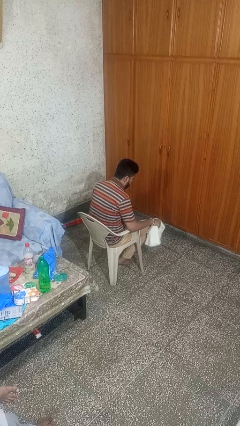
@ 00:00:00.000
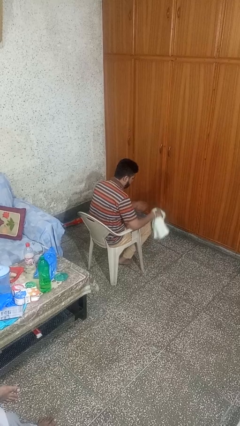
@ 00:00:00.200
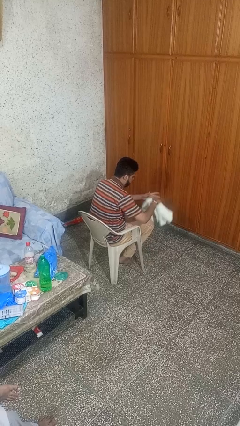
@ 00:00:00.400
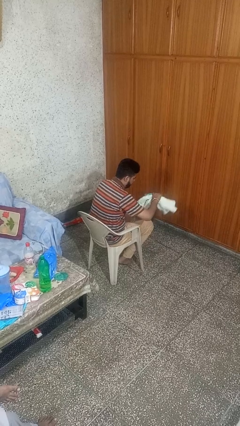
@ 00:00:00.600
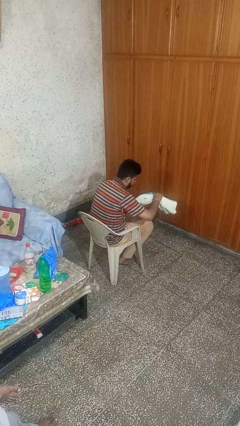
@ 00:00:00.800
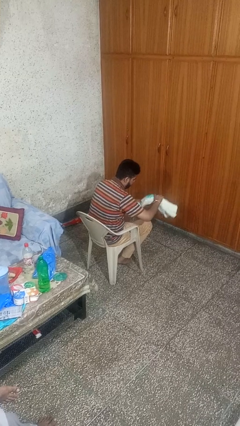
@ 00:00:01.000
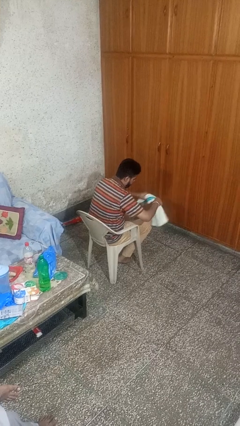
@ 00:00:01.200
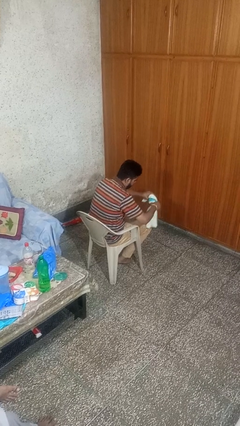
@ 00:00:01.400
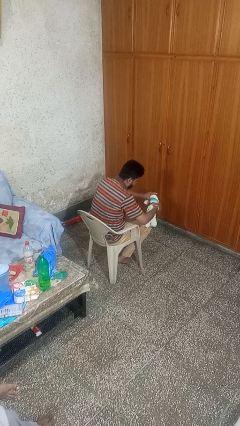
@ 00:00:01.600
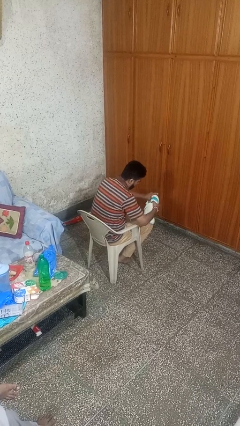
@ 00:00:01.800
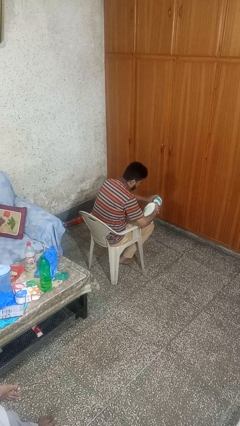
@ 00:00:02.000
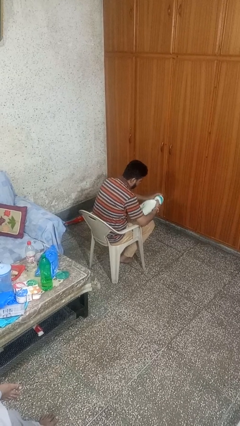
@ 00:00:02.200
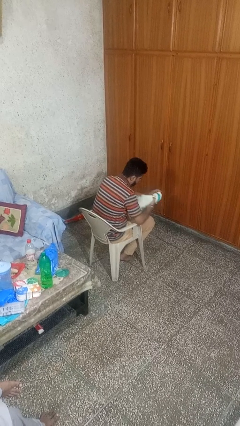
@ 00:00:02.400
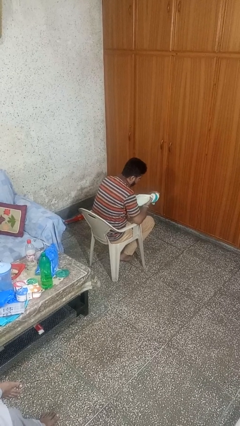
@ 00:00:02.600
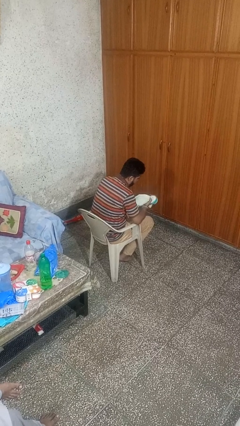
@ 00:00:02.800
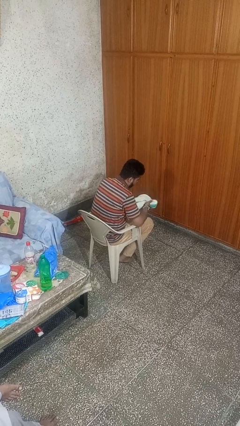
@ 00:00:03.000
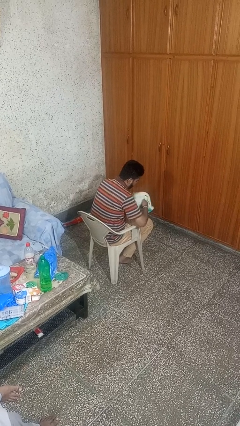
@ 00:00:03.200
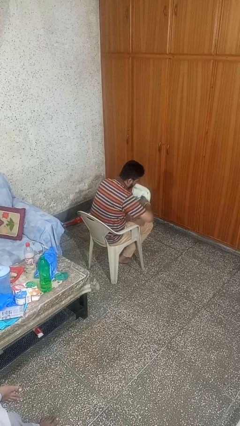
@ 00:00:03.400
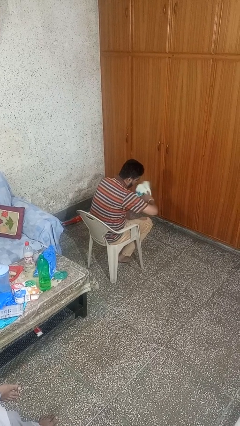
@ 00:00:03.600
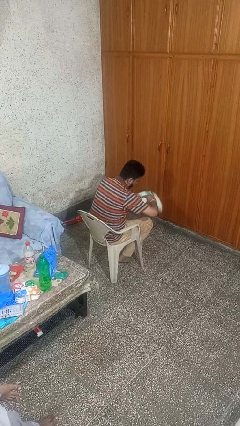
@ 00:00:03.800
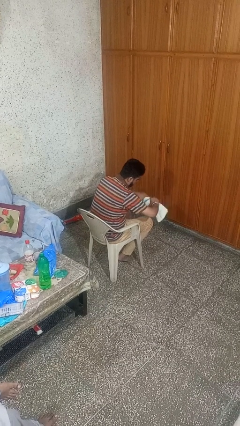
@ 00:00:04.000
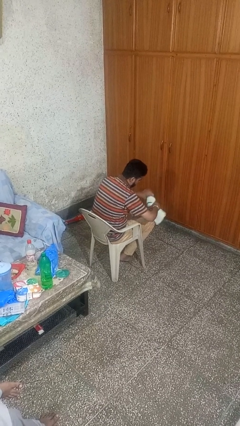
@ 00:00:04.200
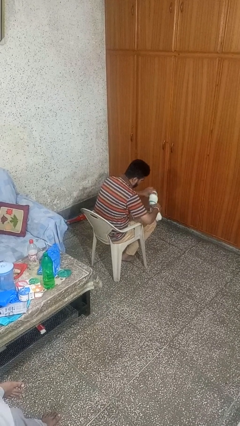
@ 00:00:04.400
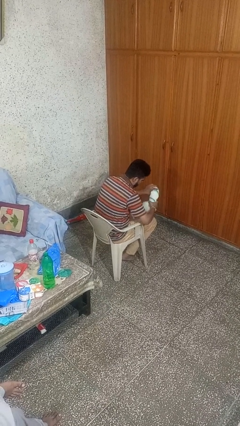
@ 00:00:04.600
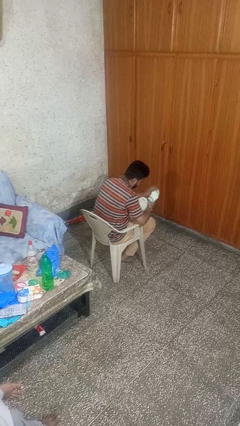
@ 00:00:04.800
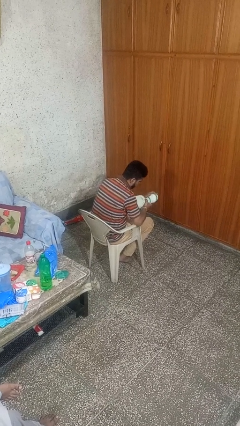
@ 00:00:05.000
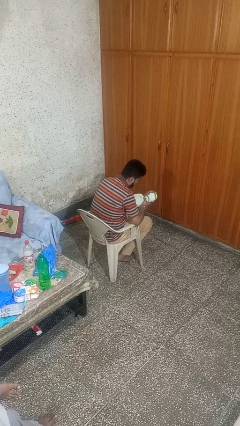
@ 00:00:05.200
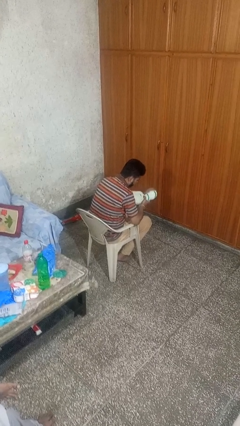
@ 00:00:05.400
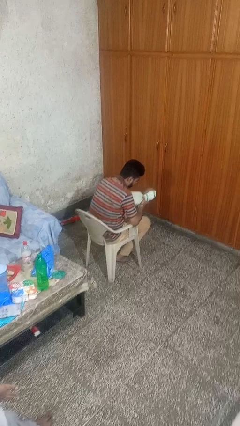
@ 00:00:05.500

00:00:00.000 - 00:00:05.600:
person squeezes object

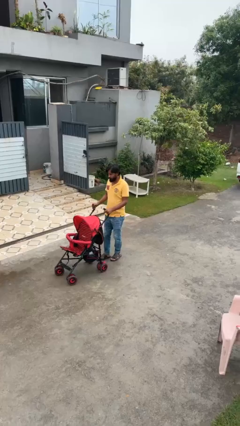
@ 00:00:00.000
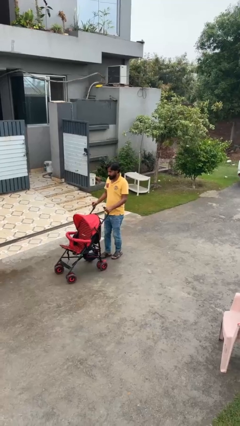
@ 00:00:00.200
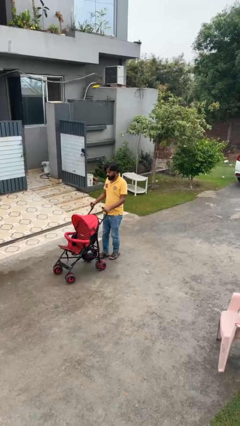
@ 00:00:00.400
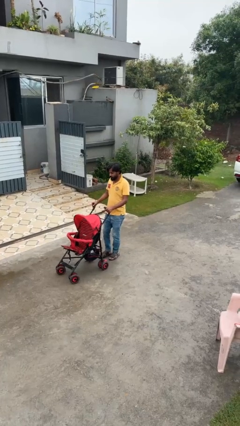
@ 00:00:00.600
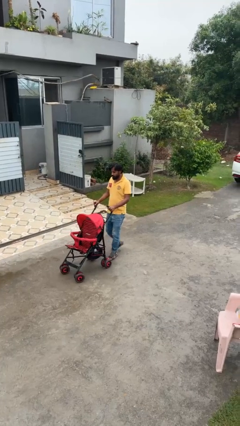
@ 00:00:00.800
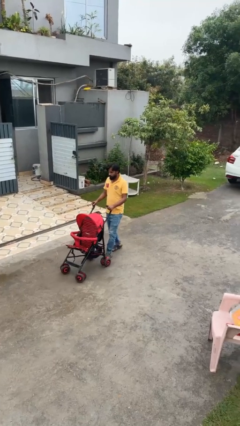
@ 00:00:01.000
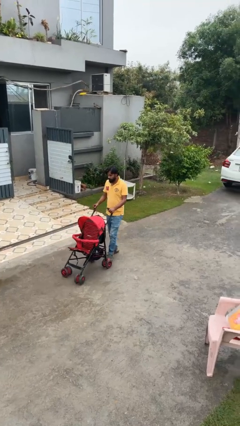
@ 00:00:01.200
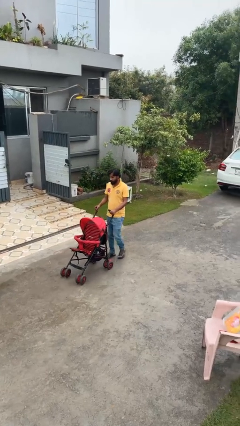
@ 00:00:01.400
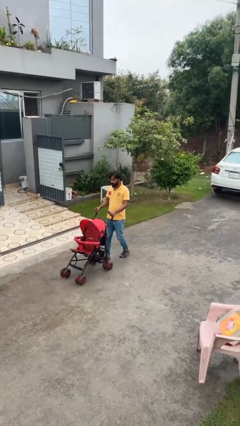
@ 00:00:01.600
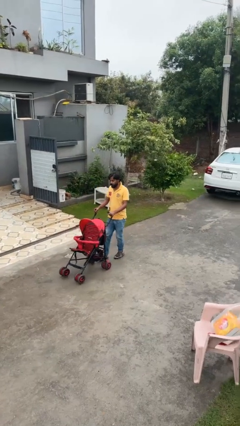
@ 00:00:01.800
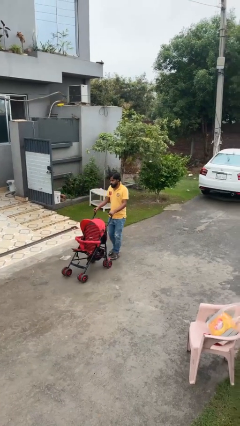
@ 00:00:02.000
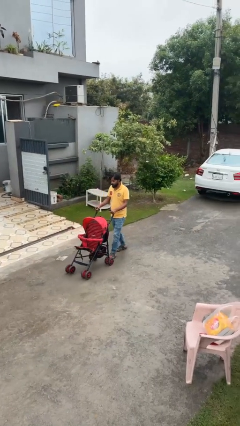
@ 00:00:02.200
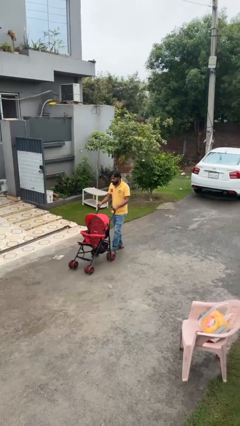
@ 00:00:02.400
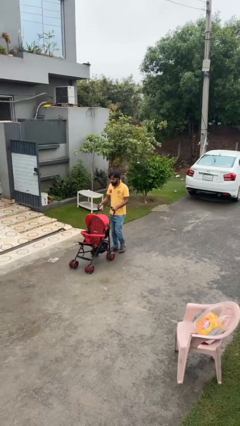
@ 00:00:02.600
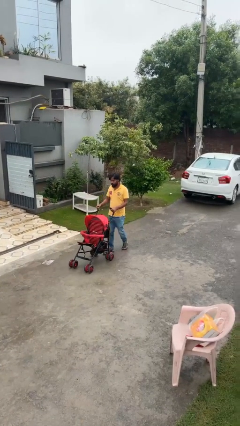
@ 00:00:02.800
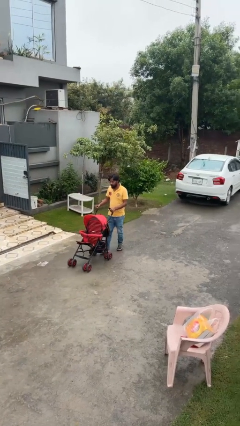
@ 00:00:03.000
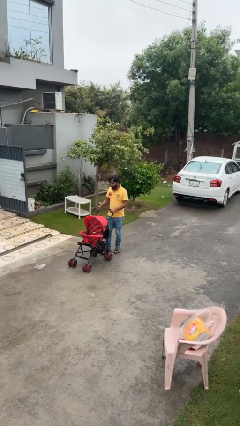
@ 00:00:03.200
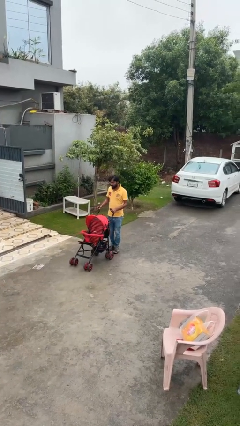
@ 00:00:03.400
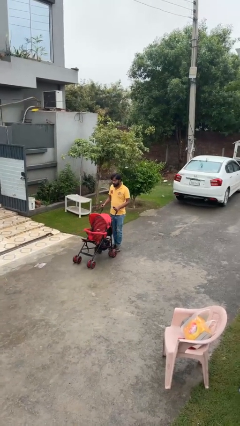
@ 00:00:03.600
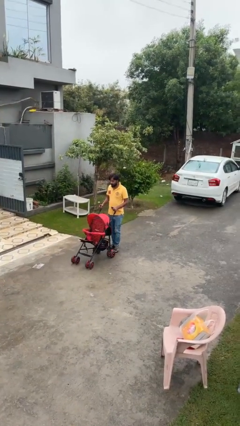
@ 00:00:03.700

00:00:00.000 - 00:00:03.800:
person pulls wheeled cart

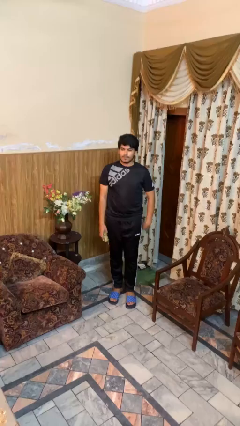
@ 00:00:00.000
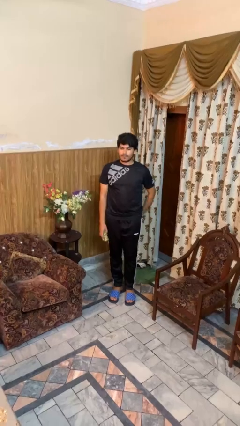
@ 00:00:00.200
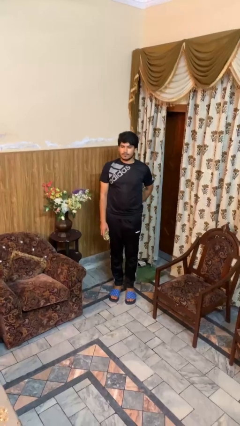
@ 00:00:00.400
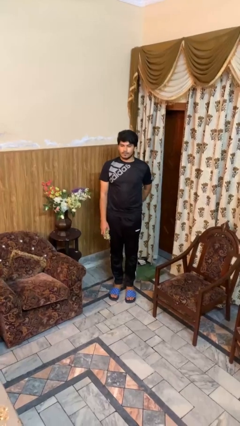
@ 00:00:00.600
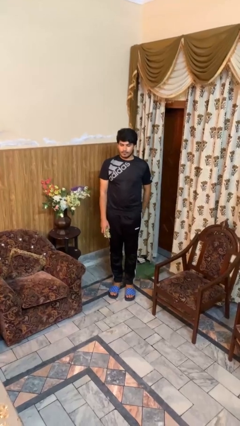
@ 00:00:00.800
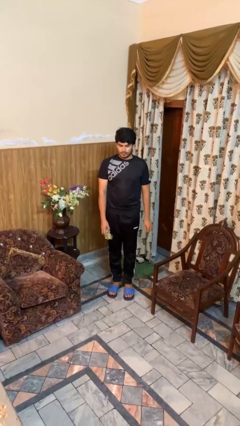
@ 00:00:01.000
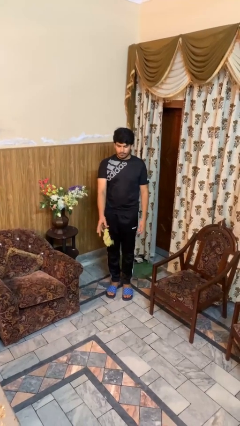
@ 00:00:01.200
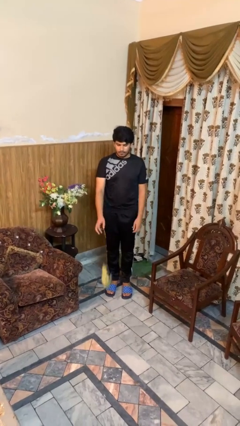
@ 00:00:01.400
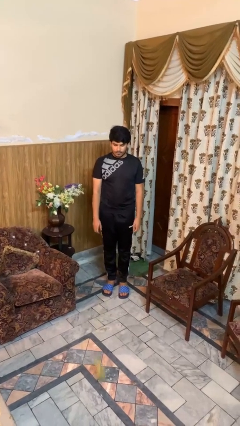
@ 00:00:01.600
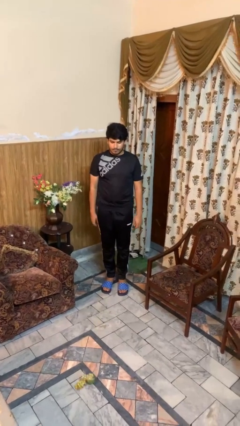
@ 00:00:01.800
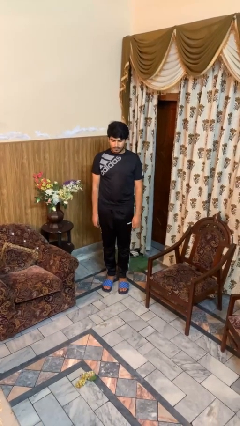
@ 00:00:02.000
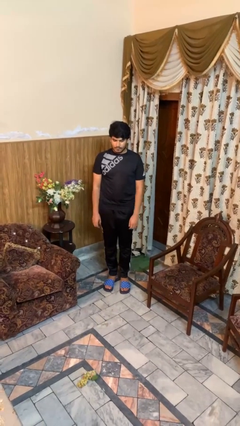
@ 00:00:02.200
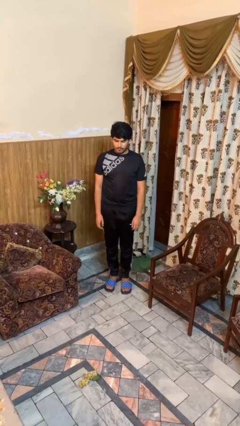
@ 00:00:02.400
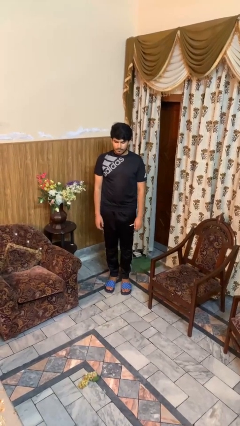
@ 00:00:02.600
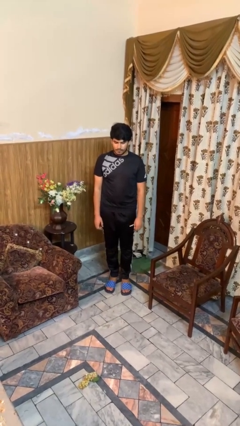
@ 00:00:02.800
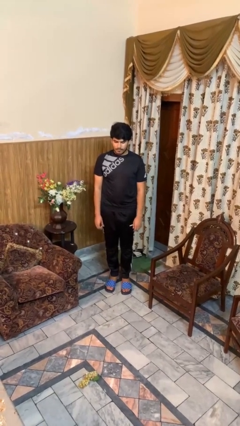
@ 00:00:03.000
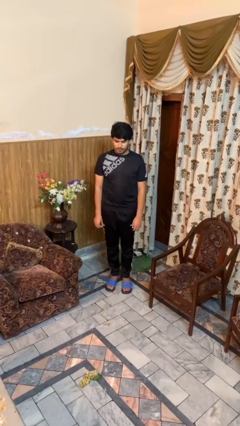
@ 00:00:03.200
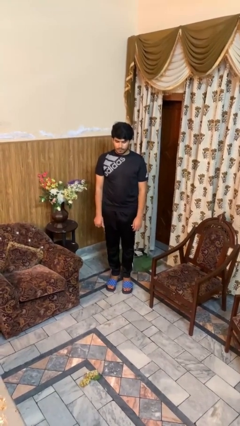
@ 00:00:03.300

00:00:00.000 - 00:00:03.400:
person throws object to ground

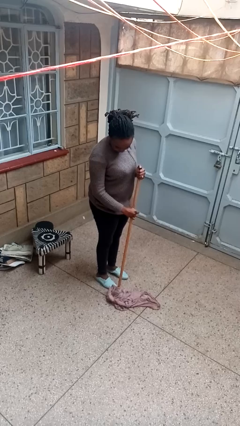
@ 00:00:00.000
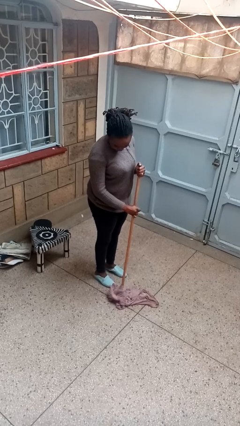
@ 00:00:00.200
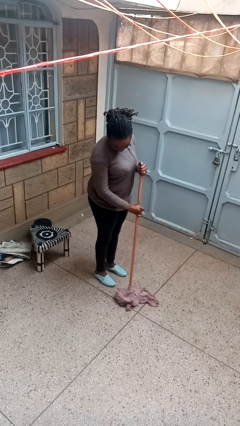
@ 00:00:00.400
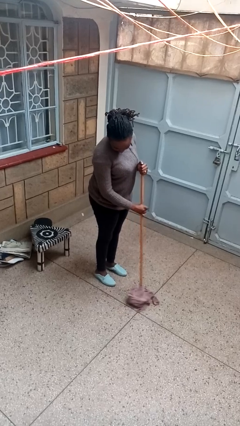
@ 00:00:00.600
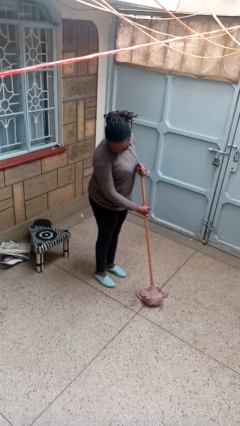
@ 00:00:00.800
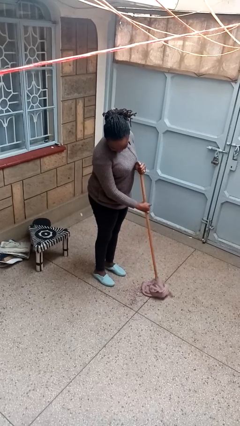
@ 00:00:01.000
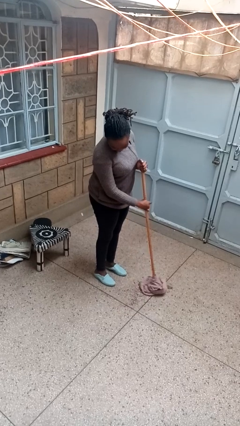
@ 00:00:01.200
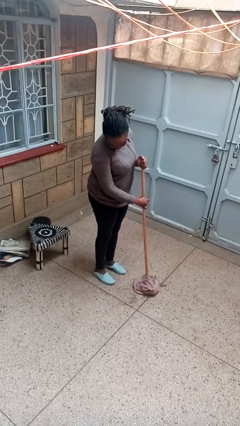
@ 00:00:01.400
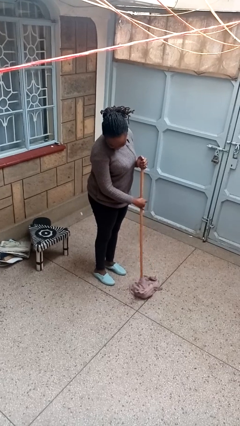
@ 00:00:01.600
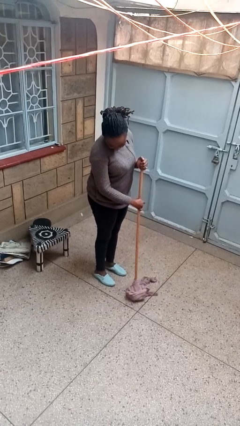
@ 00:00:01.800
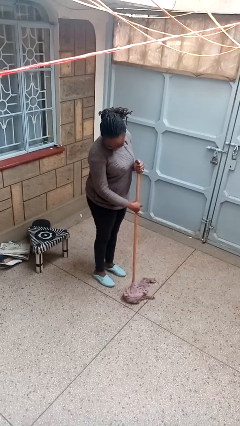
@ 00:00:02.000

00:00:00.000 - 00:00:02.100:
person mops

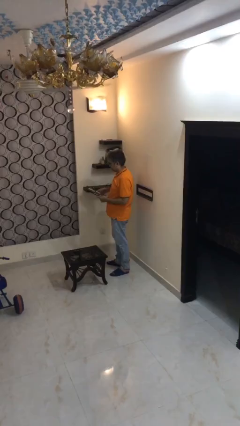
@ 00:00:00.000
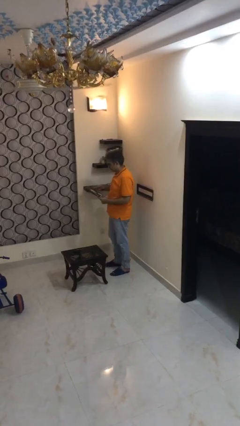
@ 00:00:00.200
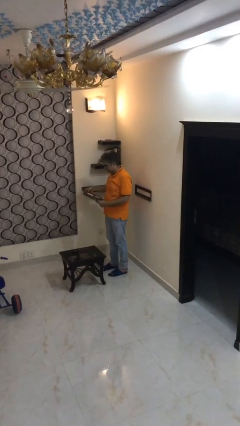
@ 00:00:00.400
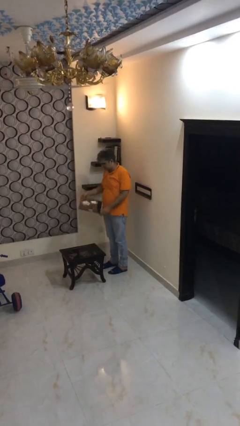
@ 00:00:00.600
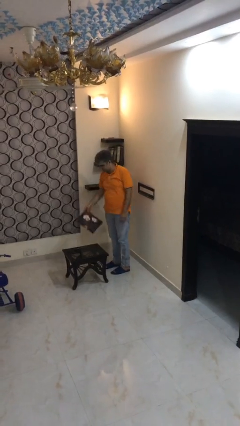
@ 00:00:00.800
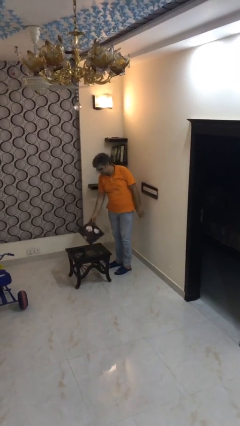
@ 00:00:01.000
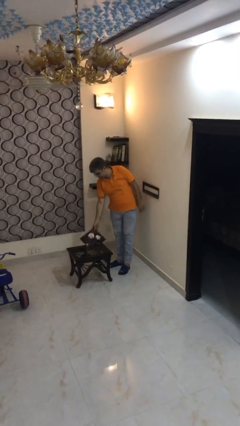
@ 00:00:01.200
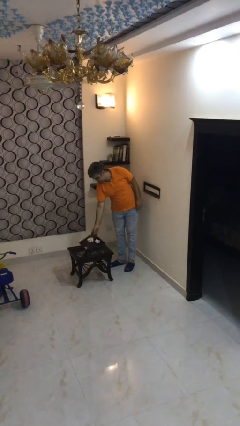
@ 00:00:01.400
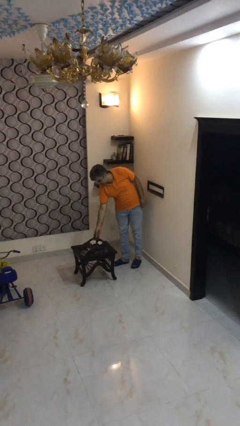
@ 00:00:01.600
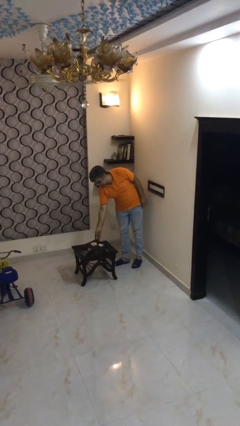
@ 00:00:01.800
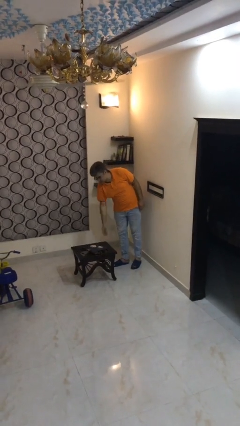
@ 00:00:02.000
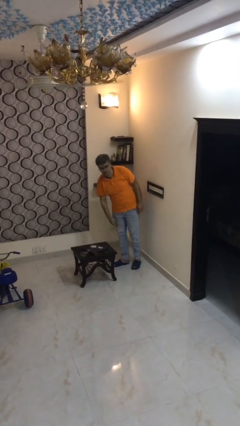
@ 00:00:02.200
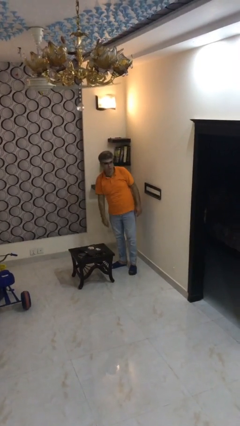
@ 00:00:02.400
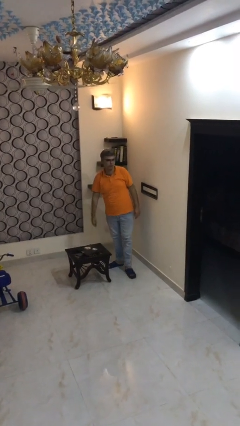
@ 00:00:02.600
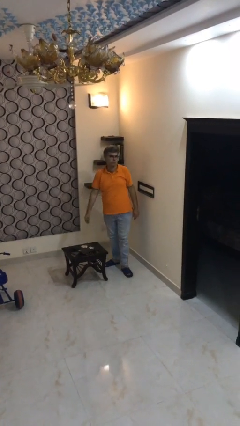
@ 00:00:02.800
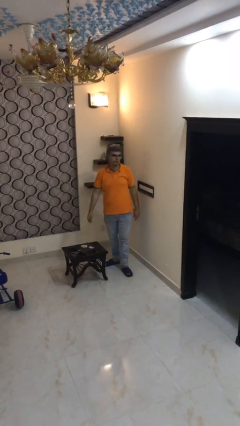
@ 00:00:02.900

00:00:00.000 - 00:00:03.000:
person puts down object on table
